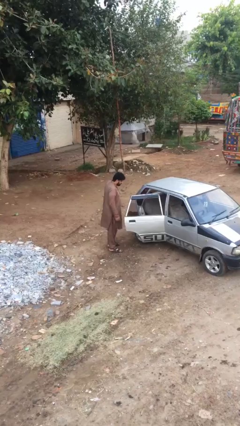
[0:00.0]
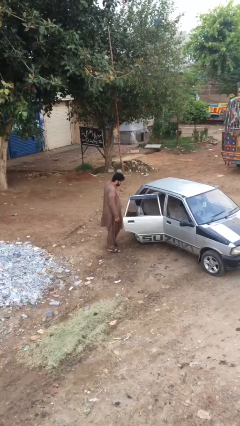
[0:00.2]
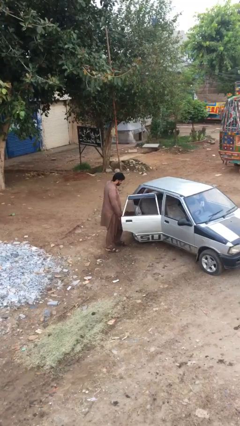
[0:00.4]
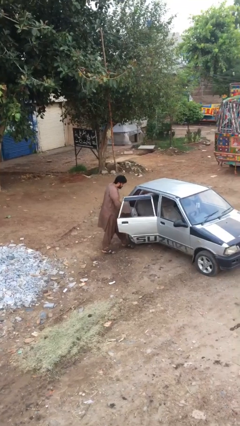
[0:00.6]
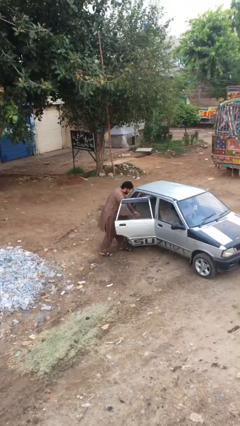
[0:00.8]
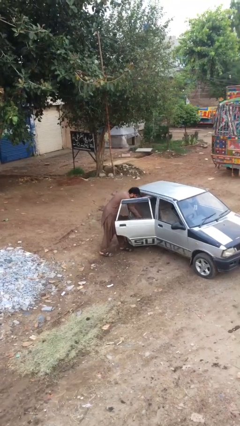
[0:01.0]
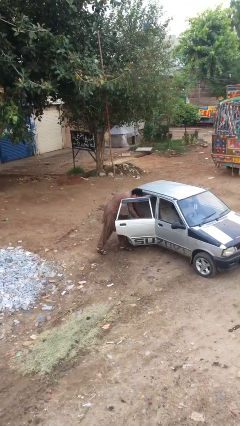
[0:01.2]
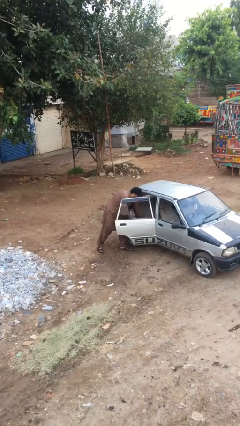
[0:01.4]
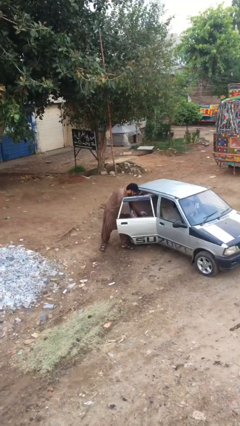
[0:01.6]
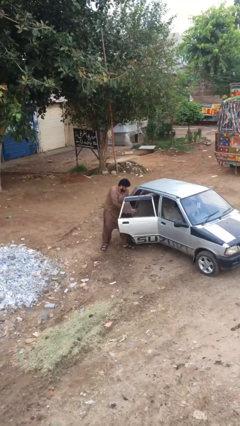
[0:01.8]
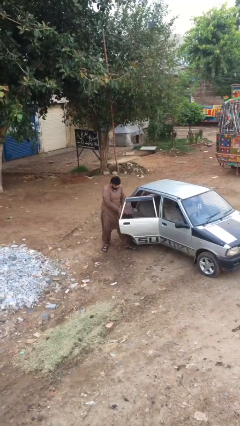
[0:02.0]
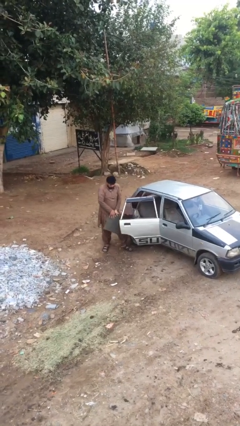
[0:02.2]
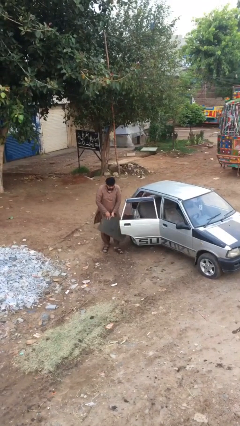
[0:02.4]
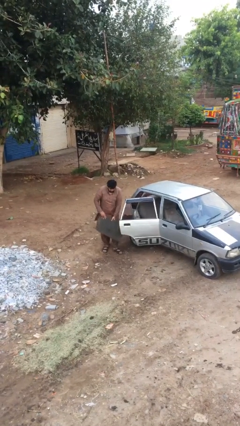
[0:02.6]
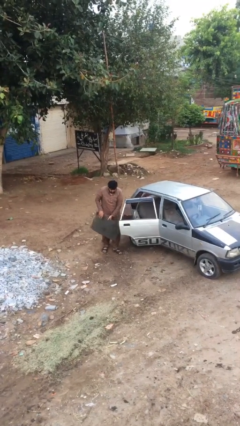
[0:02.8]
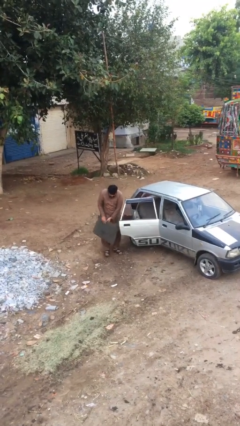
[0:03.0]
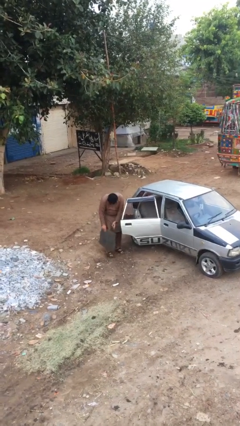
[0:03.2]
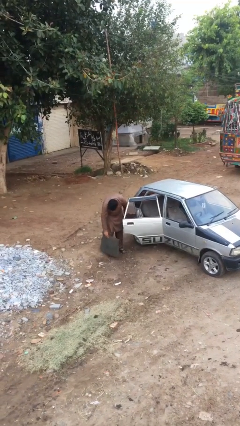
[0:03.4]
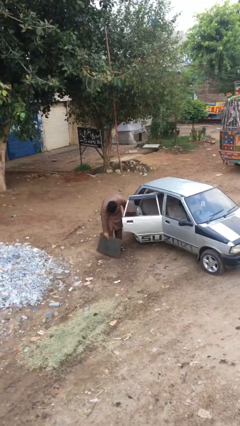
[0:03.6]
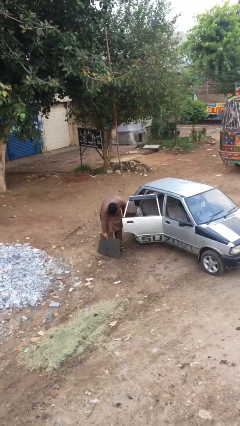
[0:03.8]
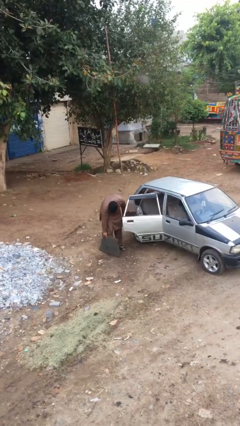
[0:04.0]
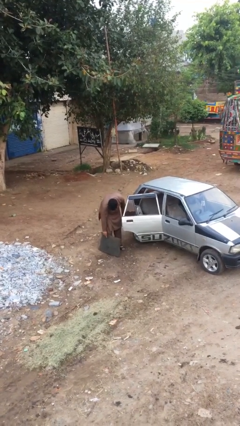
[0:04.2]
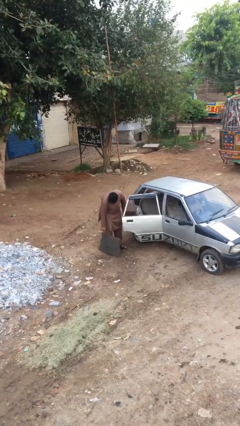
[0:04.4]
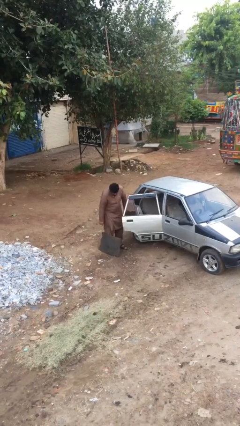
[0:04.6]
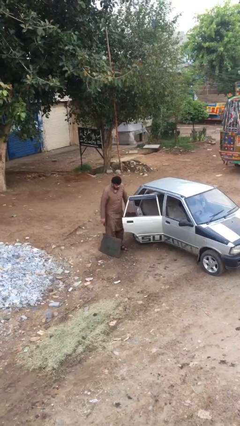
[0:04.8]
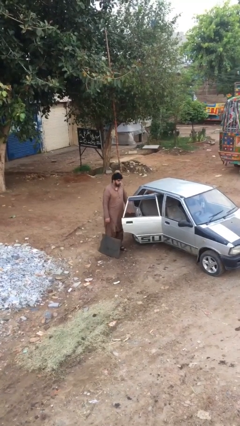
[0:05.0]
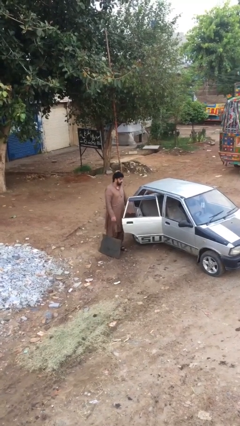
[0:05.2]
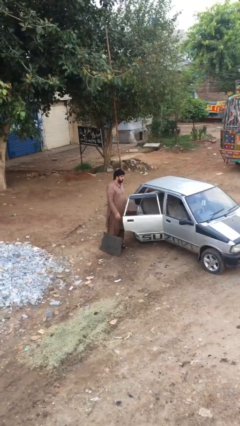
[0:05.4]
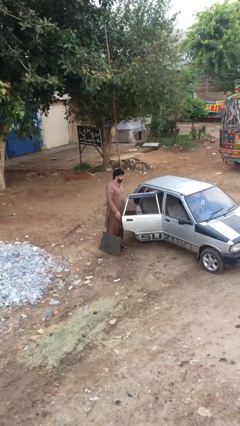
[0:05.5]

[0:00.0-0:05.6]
person unloads car

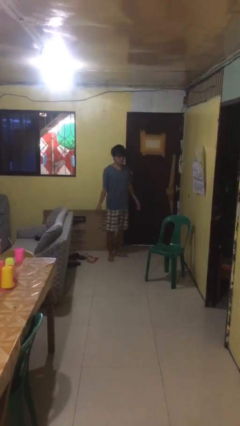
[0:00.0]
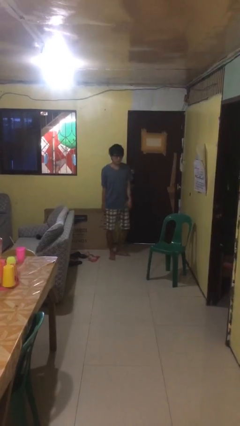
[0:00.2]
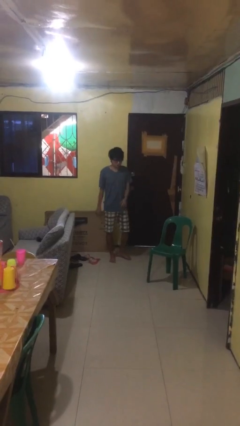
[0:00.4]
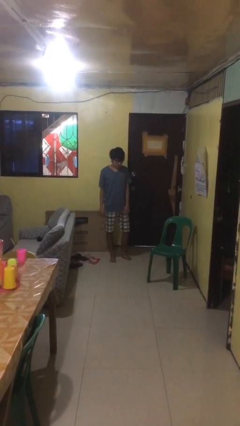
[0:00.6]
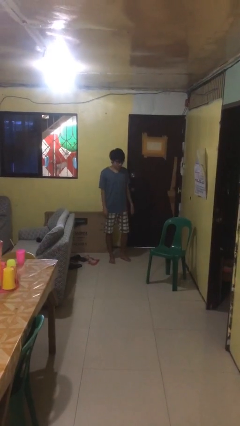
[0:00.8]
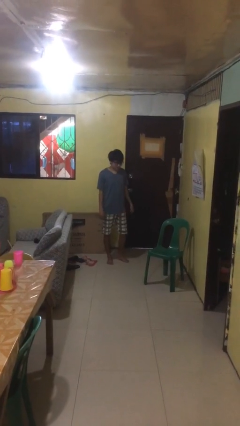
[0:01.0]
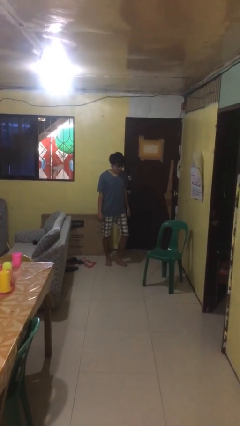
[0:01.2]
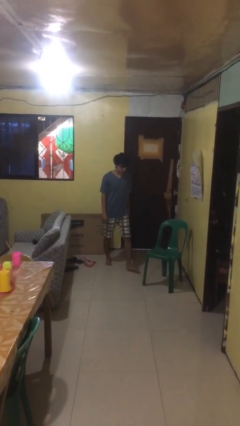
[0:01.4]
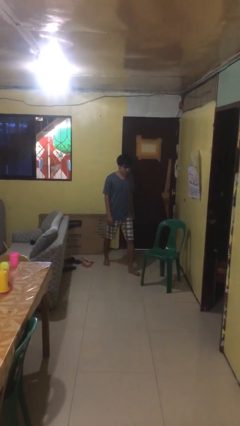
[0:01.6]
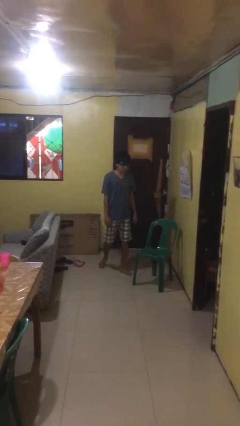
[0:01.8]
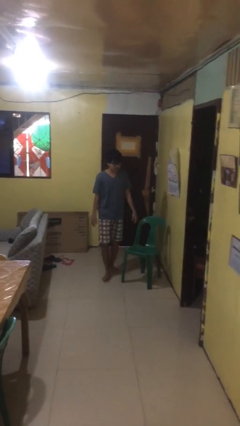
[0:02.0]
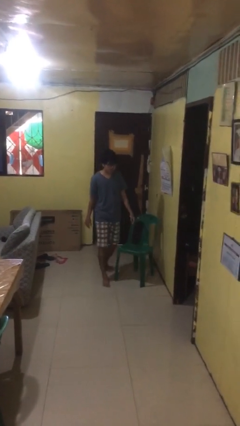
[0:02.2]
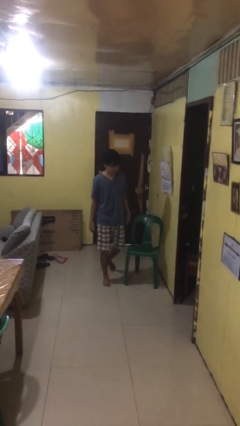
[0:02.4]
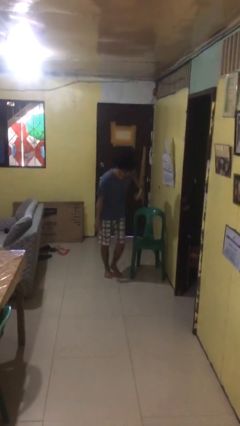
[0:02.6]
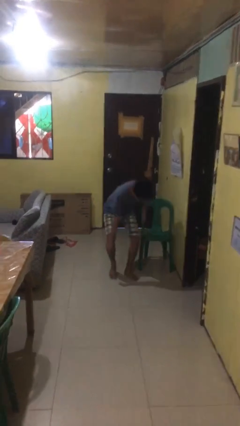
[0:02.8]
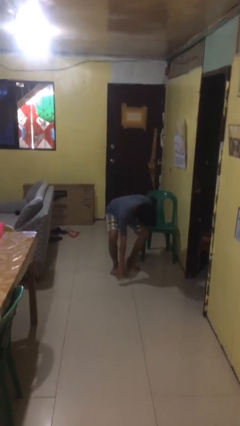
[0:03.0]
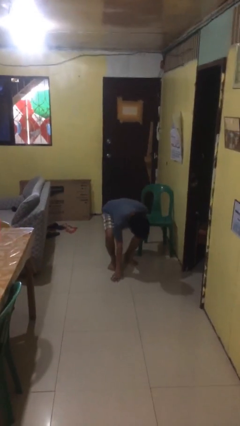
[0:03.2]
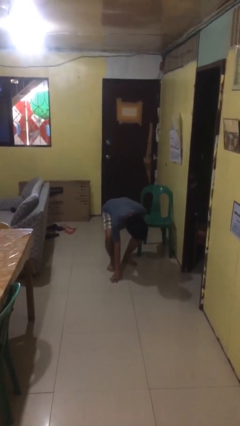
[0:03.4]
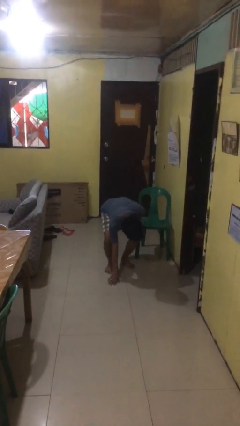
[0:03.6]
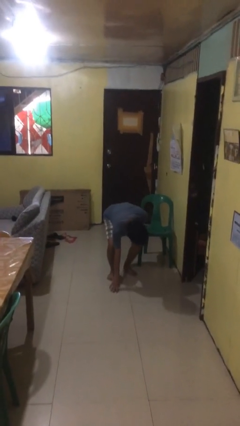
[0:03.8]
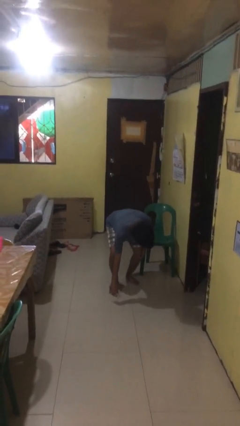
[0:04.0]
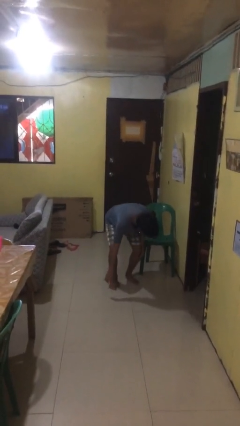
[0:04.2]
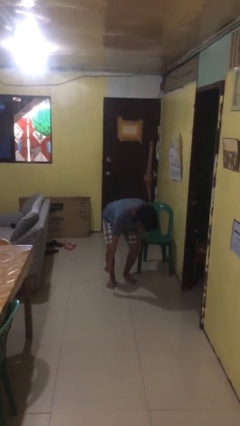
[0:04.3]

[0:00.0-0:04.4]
person trips on object on floor

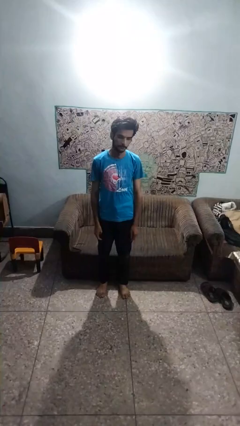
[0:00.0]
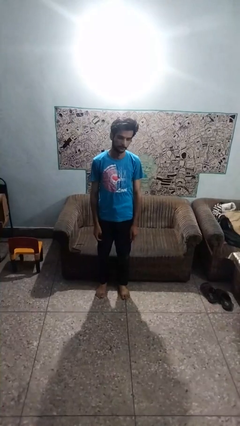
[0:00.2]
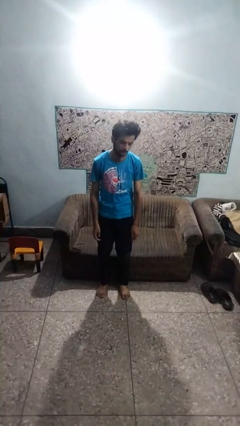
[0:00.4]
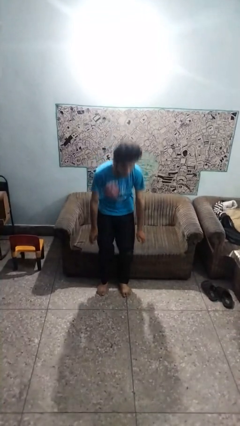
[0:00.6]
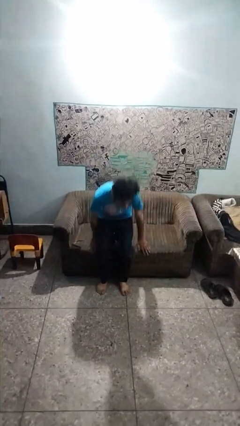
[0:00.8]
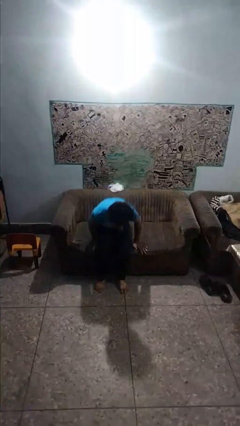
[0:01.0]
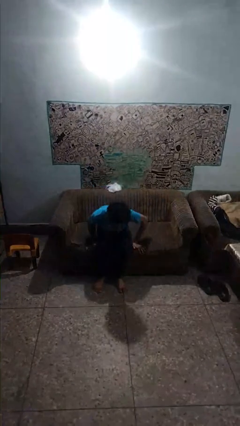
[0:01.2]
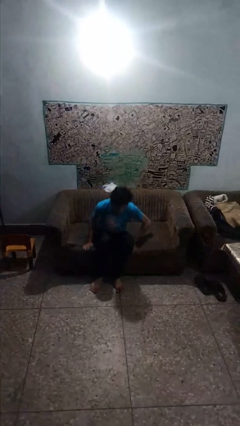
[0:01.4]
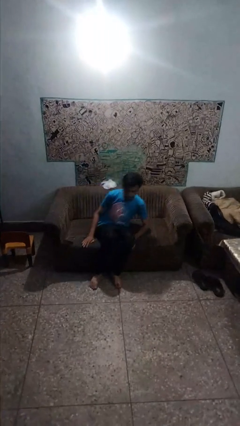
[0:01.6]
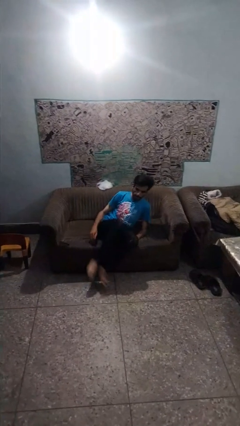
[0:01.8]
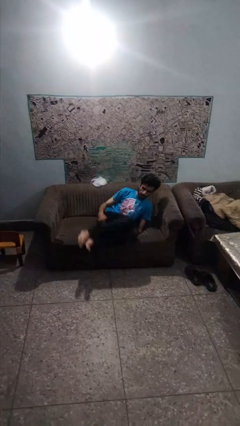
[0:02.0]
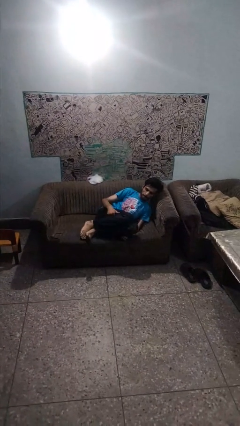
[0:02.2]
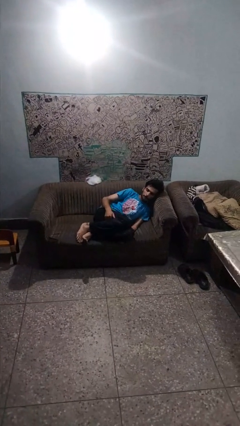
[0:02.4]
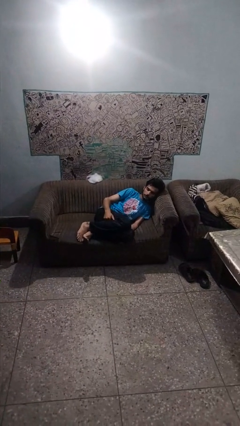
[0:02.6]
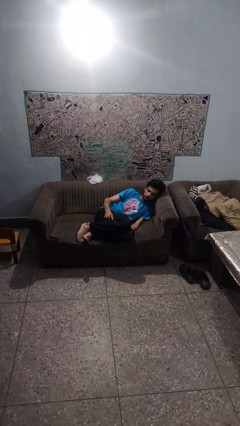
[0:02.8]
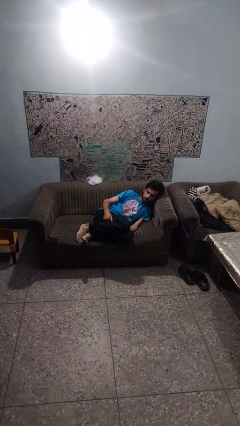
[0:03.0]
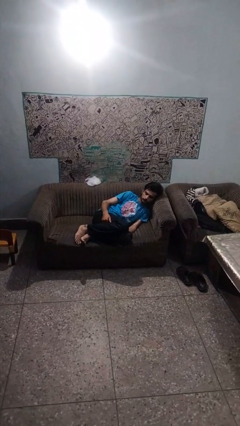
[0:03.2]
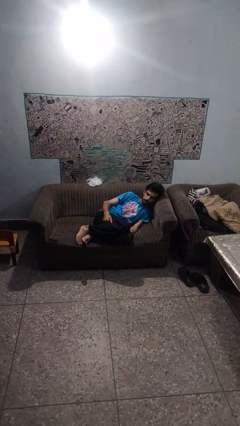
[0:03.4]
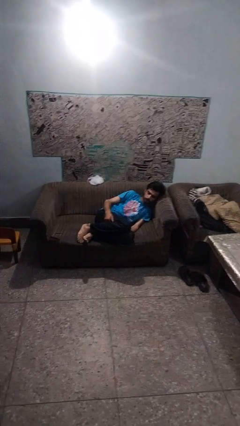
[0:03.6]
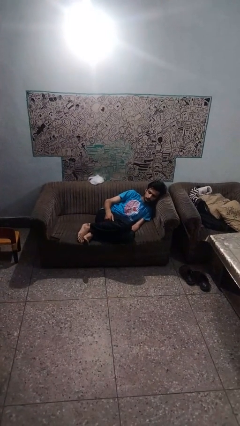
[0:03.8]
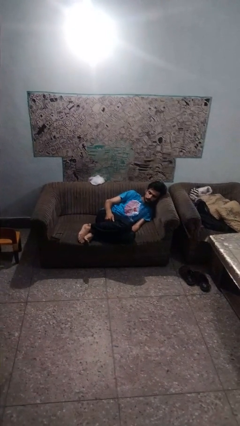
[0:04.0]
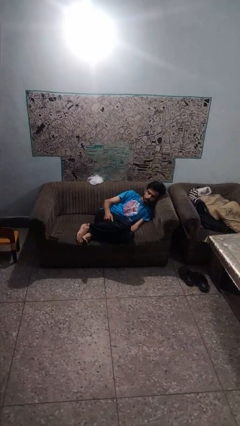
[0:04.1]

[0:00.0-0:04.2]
person lies down on couch

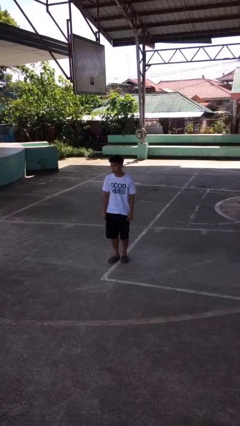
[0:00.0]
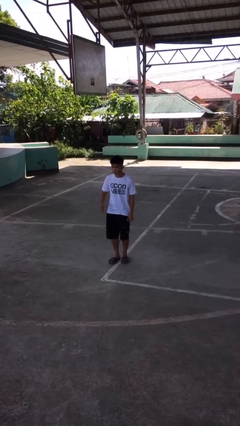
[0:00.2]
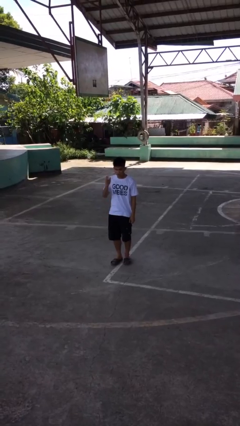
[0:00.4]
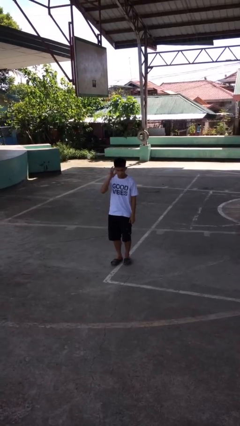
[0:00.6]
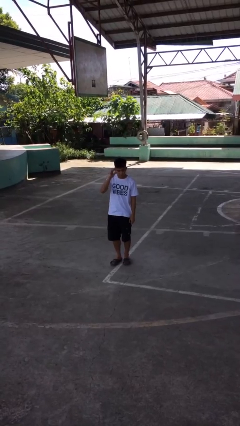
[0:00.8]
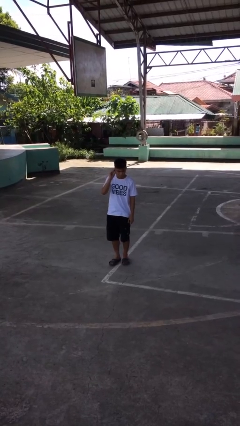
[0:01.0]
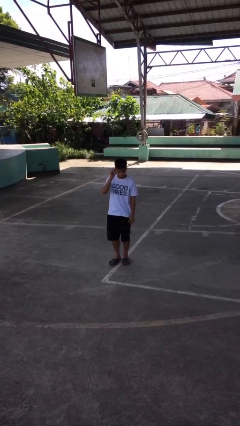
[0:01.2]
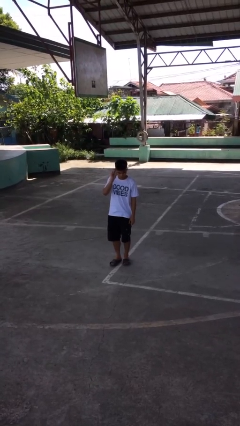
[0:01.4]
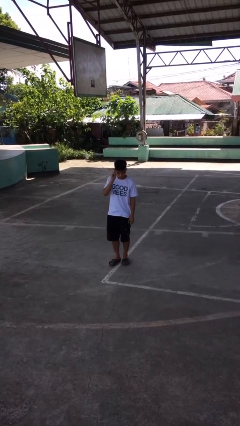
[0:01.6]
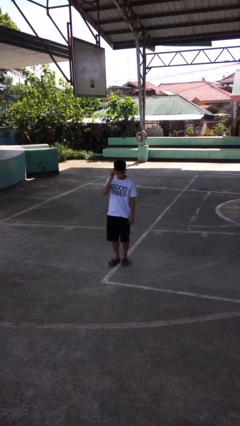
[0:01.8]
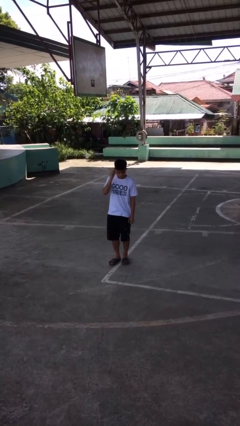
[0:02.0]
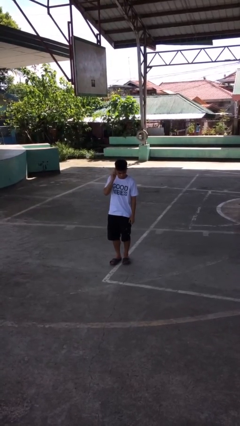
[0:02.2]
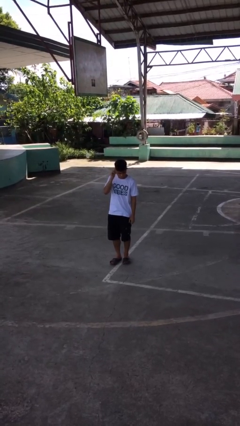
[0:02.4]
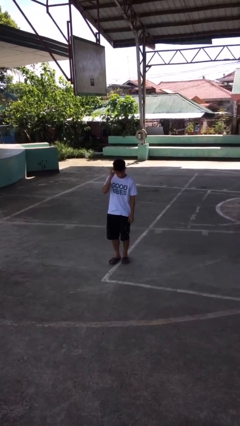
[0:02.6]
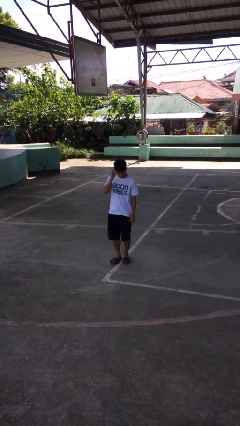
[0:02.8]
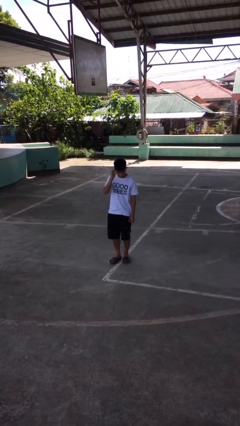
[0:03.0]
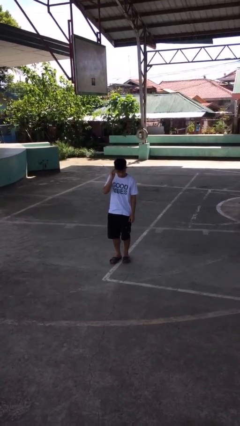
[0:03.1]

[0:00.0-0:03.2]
person touches earlobe

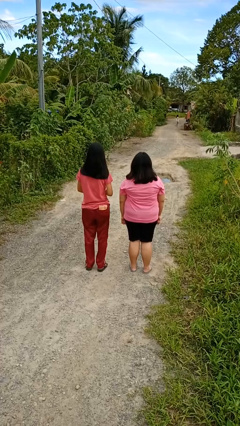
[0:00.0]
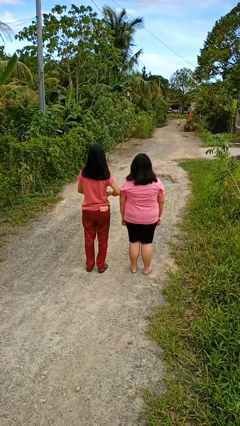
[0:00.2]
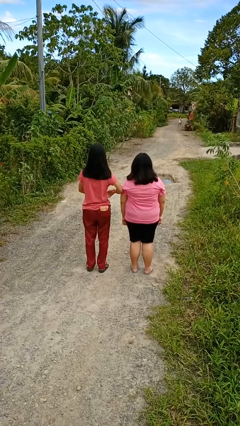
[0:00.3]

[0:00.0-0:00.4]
person nudges person with elbow
